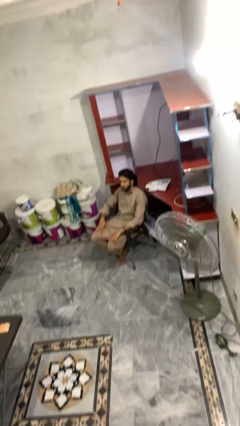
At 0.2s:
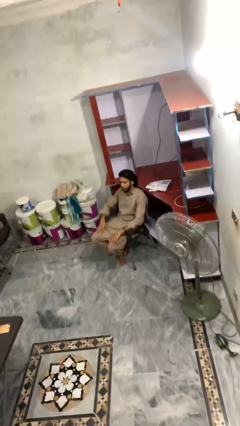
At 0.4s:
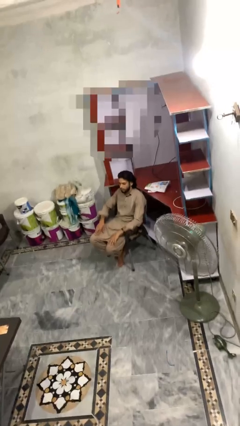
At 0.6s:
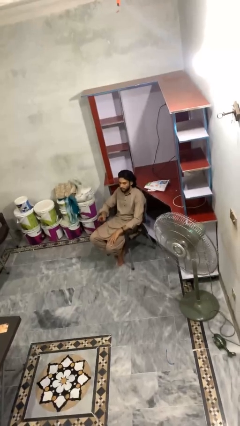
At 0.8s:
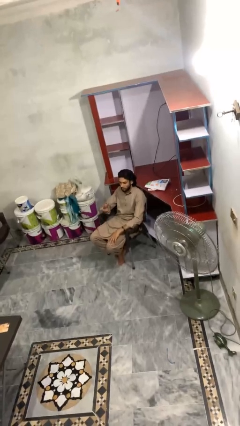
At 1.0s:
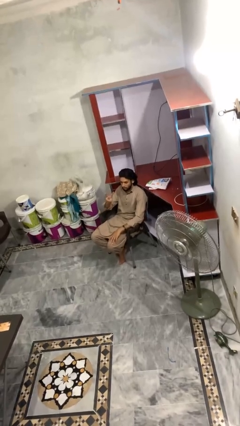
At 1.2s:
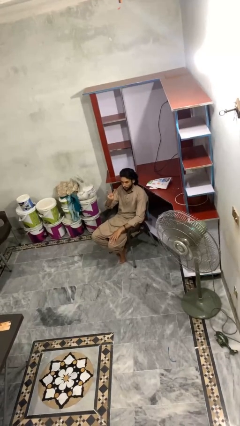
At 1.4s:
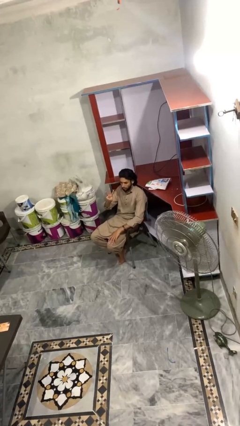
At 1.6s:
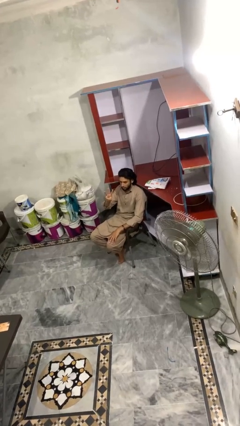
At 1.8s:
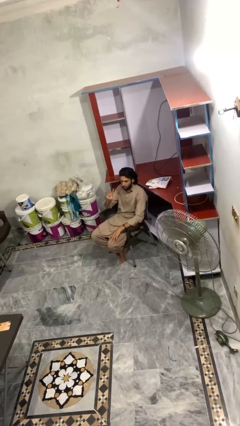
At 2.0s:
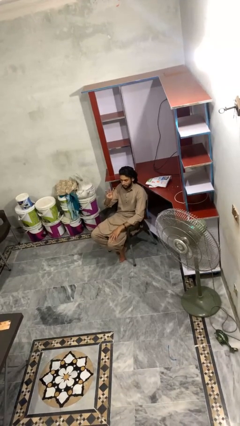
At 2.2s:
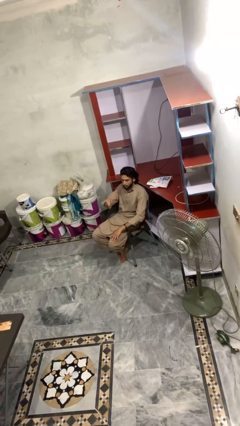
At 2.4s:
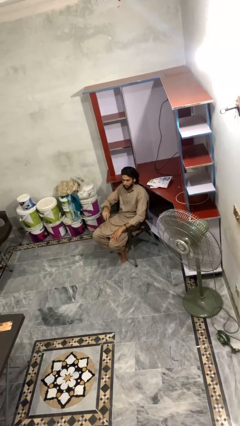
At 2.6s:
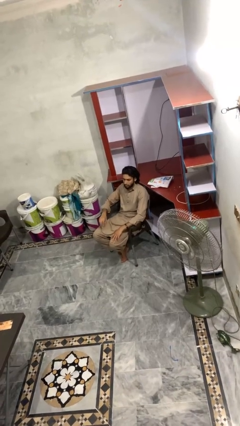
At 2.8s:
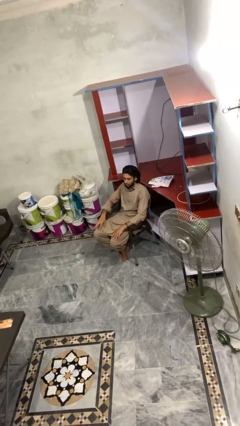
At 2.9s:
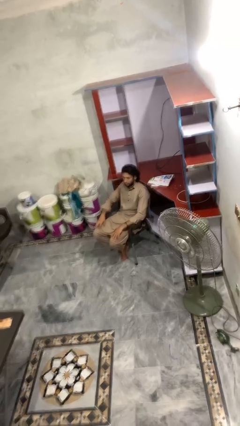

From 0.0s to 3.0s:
person gestures number three

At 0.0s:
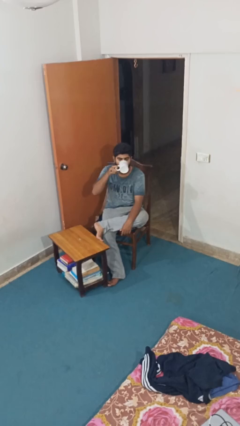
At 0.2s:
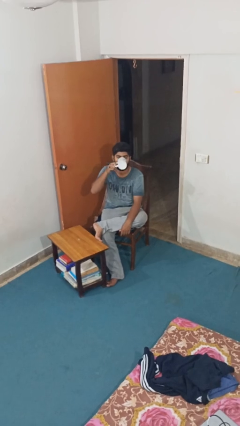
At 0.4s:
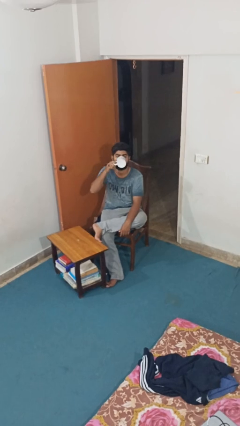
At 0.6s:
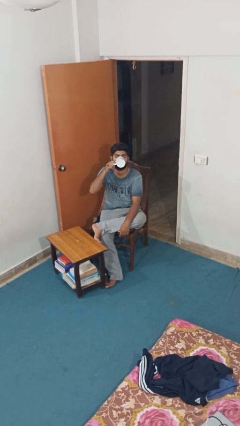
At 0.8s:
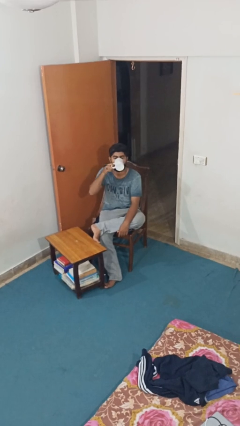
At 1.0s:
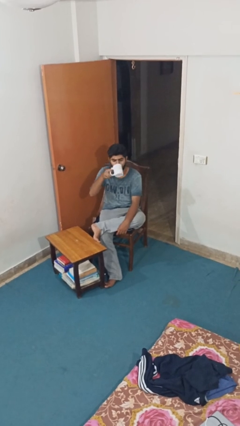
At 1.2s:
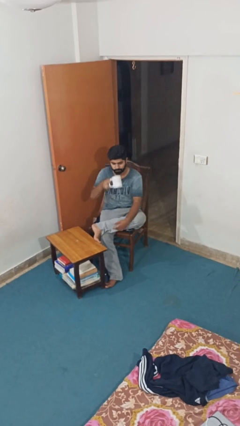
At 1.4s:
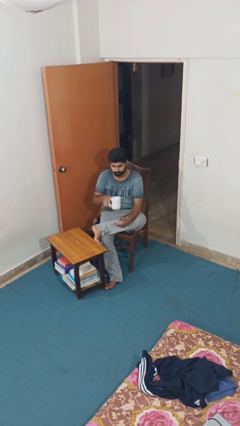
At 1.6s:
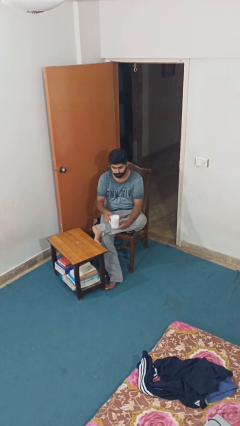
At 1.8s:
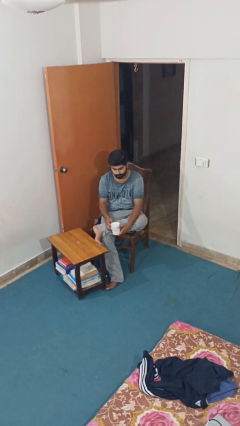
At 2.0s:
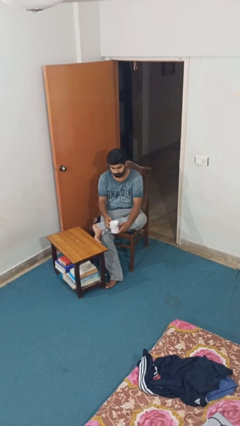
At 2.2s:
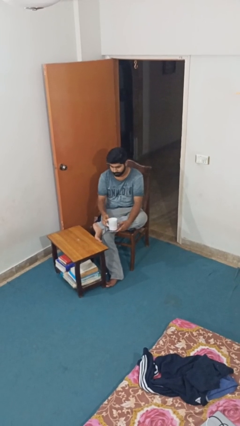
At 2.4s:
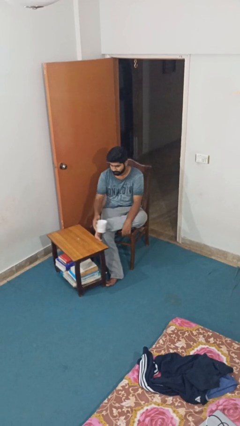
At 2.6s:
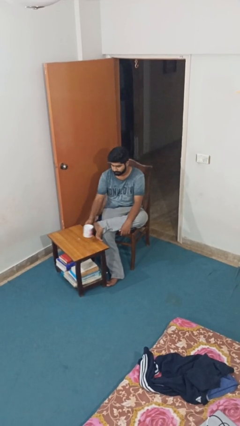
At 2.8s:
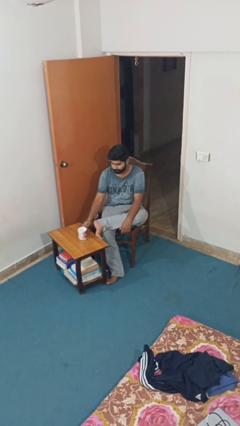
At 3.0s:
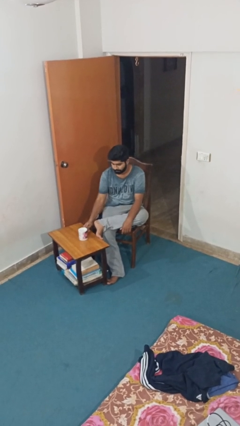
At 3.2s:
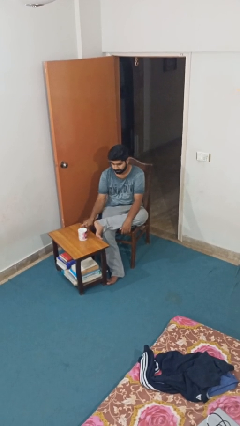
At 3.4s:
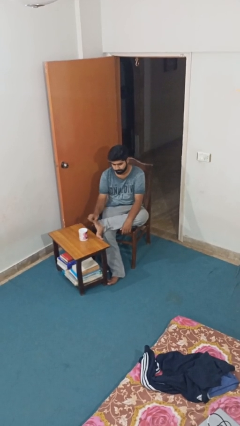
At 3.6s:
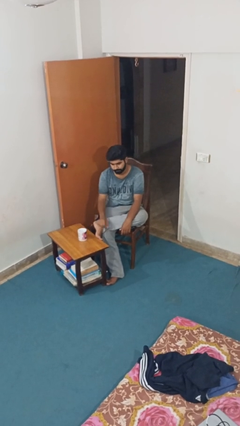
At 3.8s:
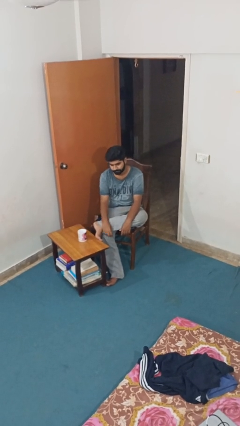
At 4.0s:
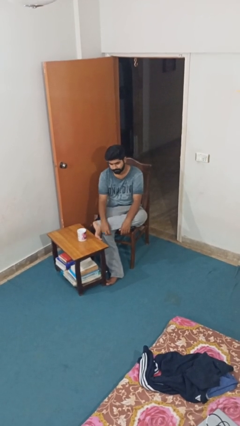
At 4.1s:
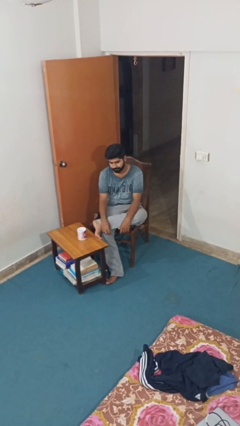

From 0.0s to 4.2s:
person puts down object on table

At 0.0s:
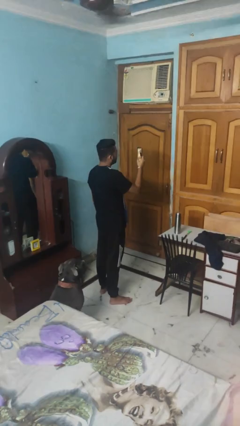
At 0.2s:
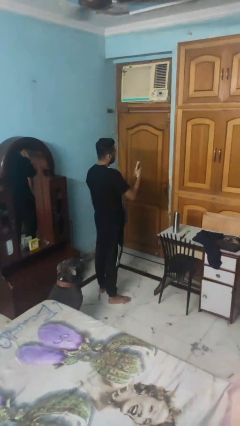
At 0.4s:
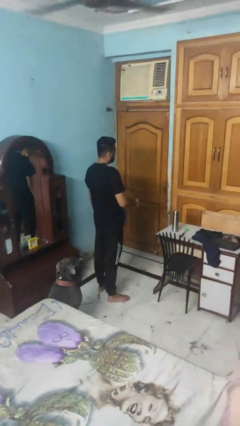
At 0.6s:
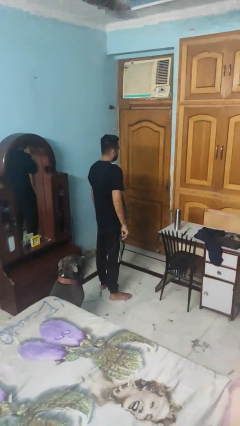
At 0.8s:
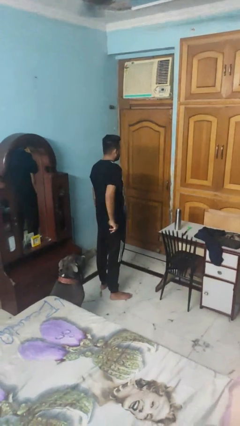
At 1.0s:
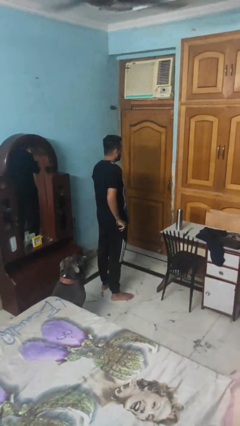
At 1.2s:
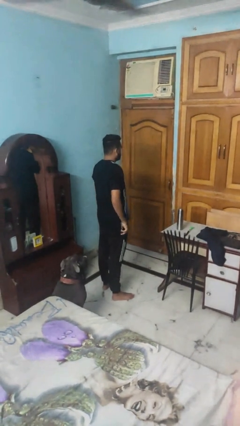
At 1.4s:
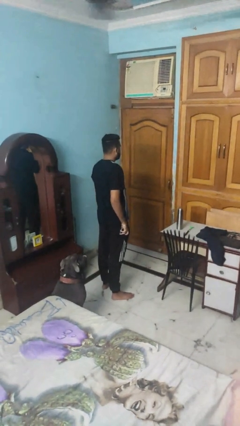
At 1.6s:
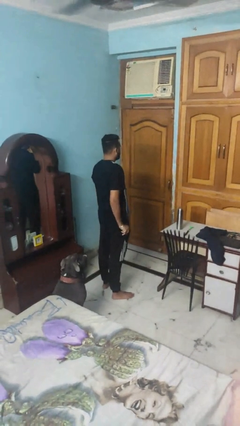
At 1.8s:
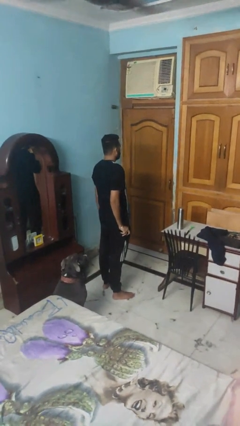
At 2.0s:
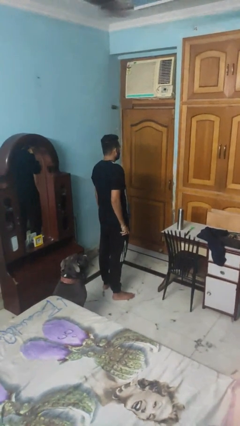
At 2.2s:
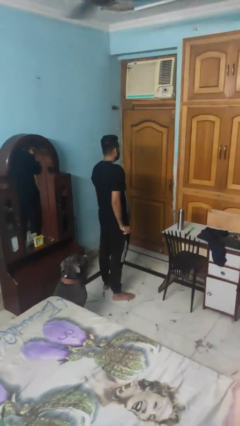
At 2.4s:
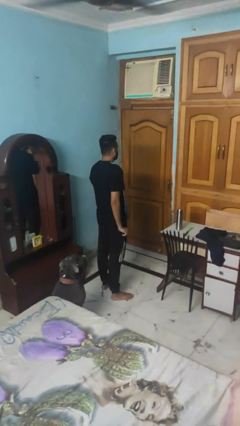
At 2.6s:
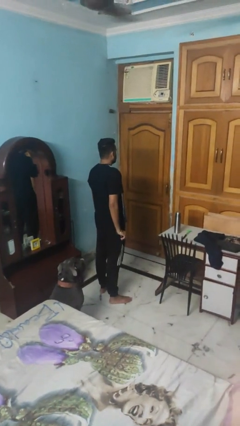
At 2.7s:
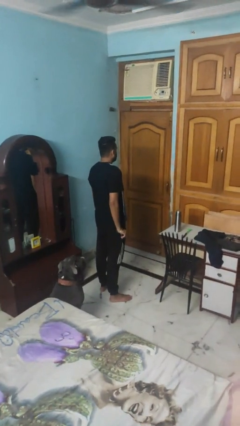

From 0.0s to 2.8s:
person puts phone into pocket

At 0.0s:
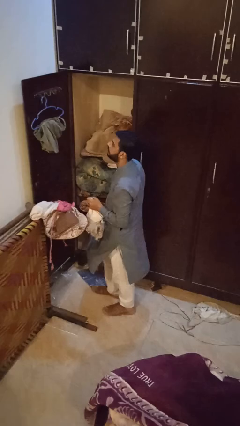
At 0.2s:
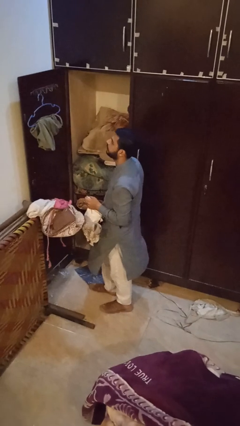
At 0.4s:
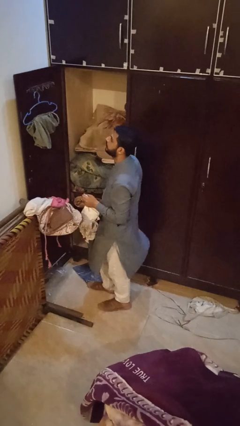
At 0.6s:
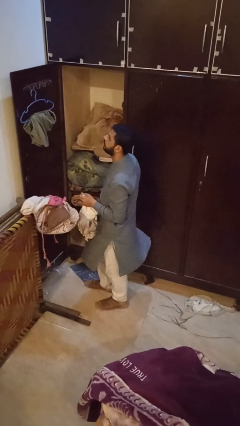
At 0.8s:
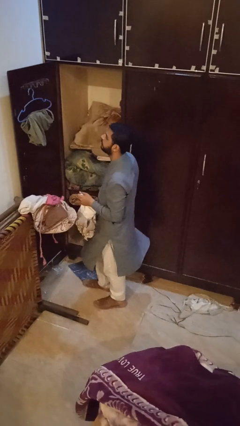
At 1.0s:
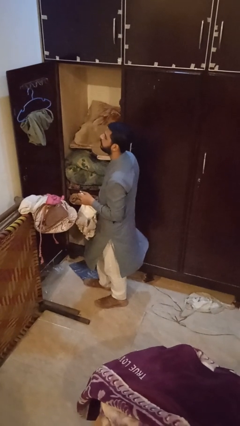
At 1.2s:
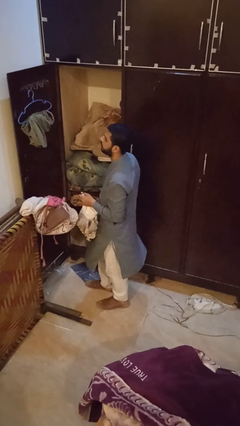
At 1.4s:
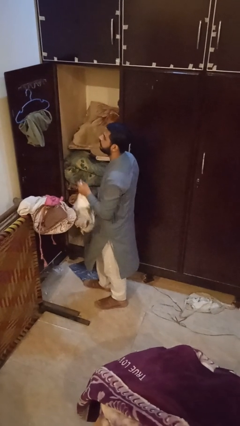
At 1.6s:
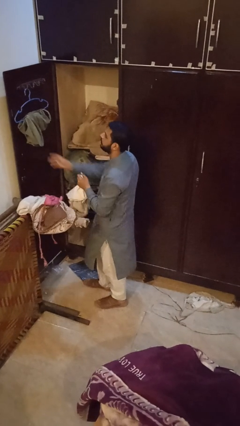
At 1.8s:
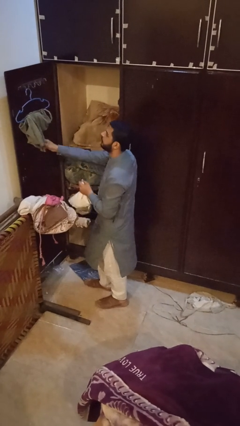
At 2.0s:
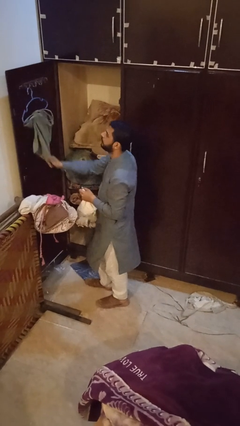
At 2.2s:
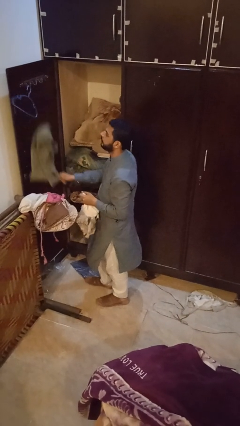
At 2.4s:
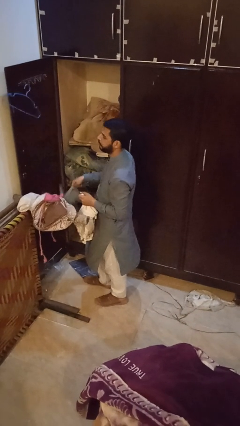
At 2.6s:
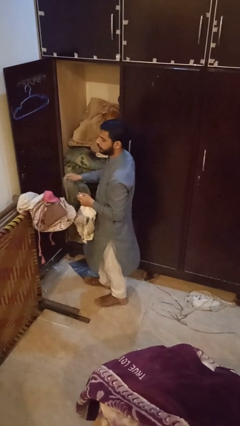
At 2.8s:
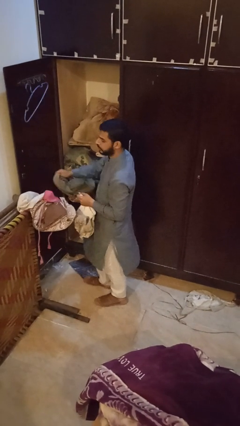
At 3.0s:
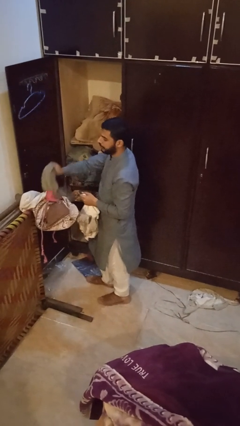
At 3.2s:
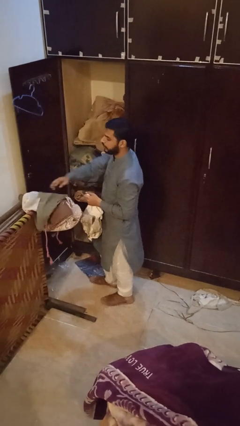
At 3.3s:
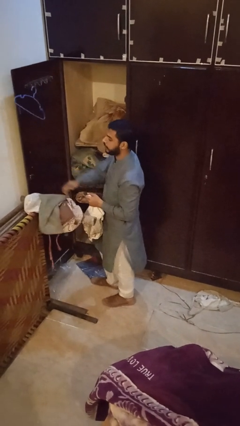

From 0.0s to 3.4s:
person takes clothes from closet

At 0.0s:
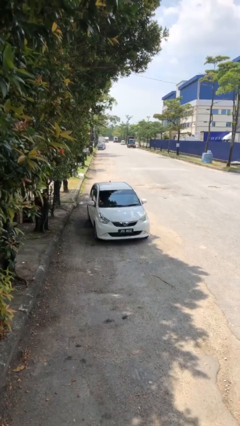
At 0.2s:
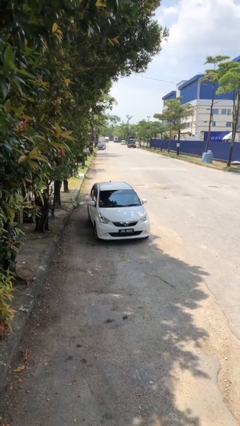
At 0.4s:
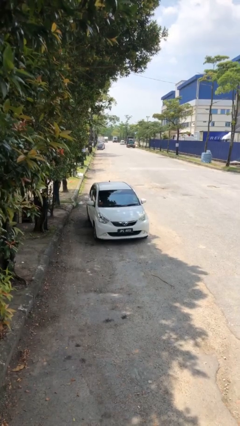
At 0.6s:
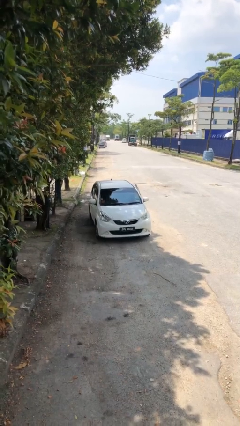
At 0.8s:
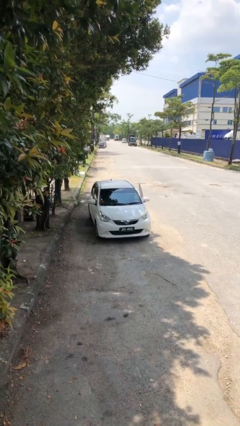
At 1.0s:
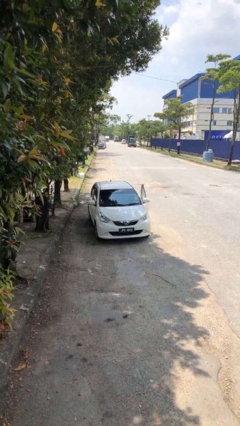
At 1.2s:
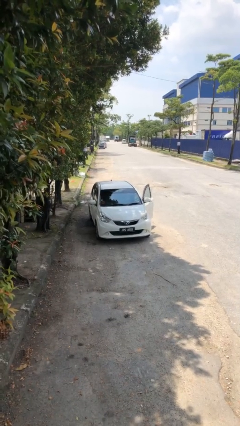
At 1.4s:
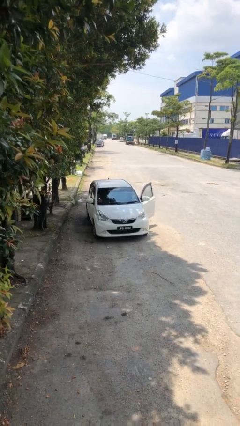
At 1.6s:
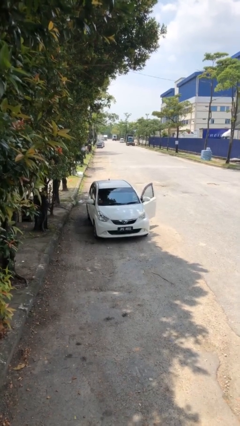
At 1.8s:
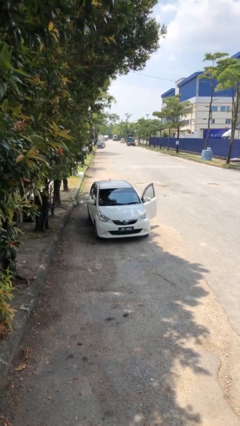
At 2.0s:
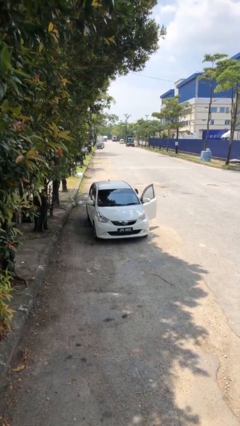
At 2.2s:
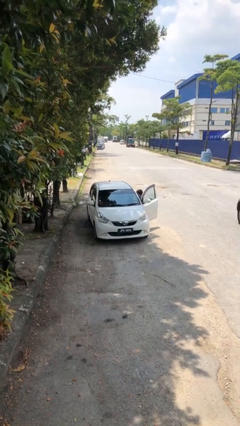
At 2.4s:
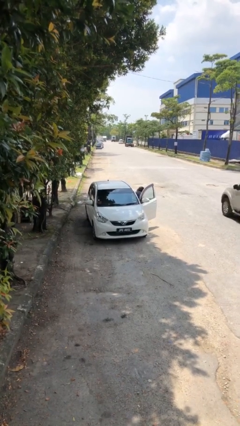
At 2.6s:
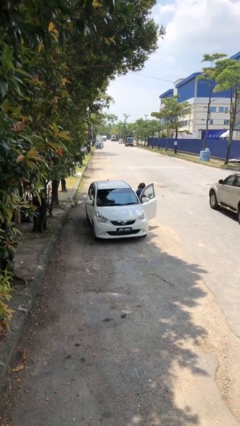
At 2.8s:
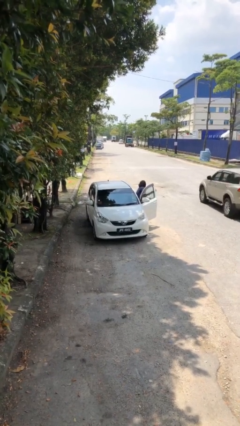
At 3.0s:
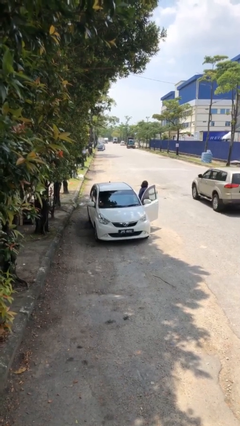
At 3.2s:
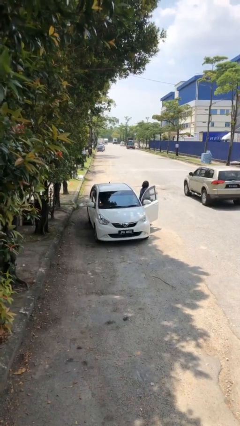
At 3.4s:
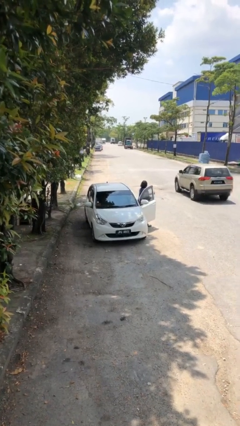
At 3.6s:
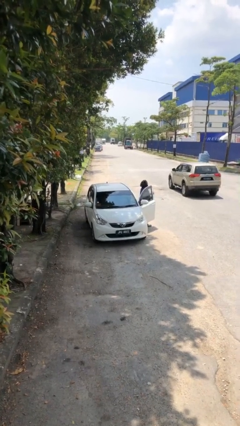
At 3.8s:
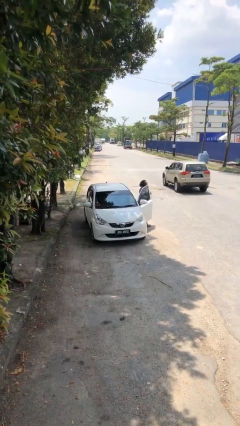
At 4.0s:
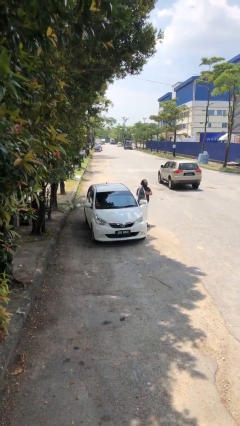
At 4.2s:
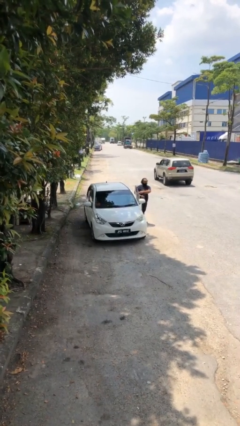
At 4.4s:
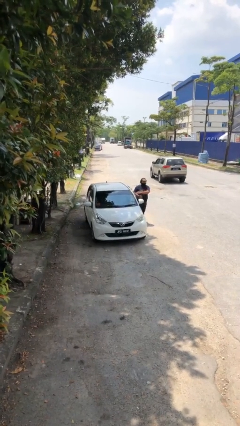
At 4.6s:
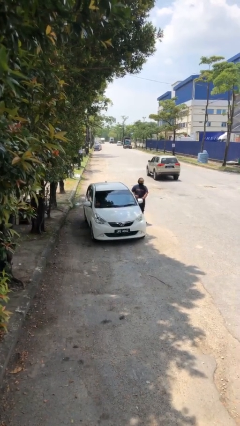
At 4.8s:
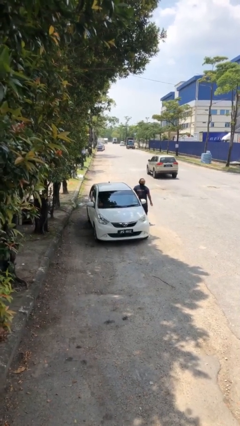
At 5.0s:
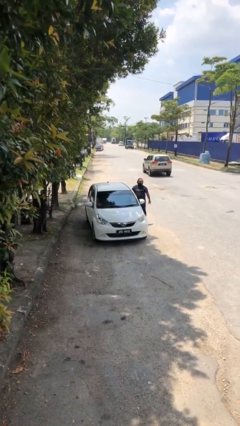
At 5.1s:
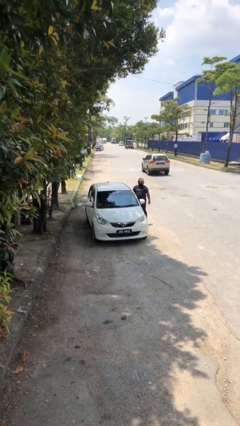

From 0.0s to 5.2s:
car drops off person
